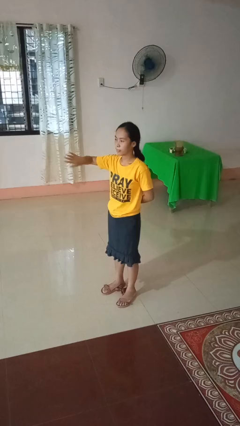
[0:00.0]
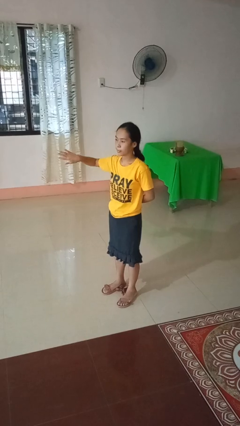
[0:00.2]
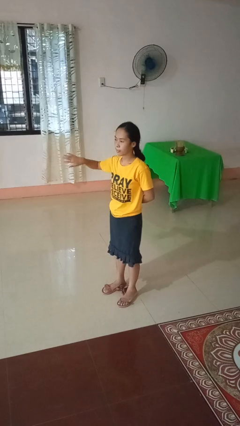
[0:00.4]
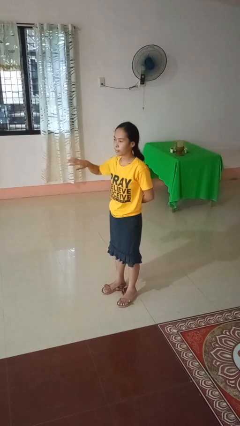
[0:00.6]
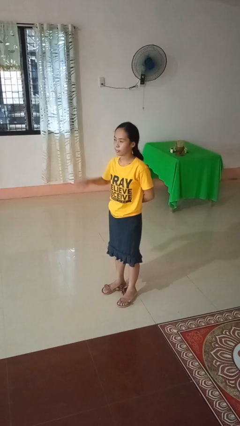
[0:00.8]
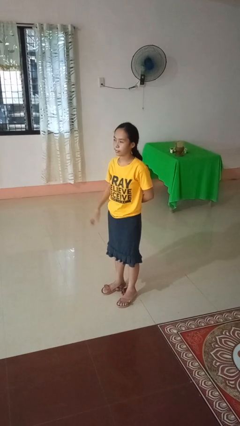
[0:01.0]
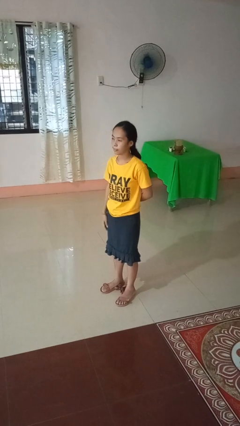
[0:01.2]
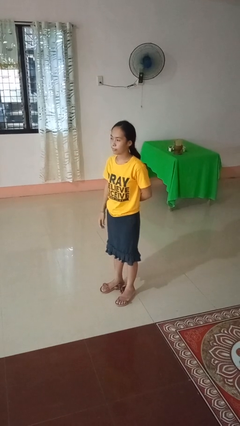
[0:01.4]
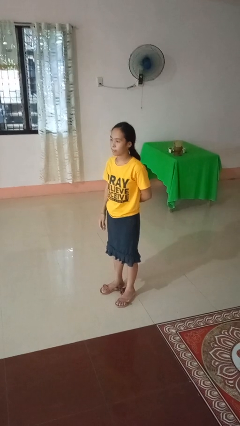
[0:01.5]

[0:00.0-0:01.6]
person gestures swipe right

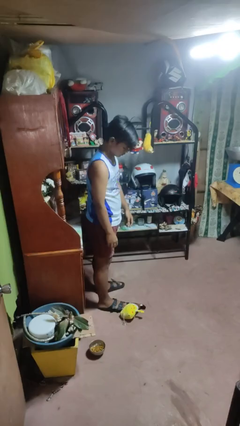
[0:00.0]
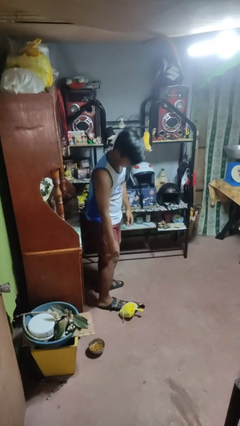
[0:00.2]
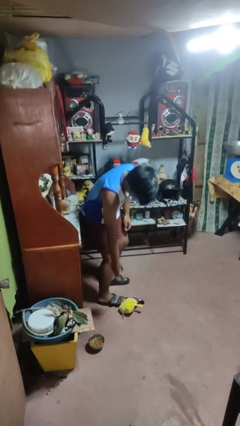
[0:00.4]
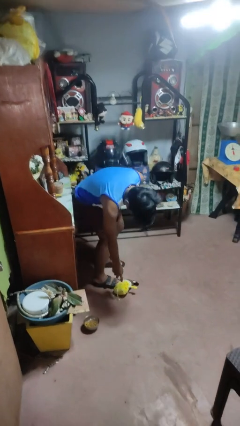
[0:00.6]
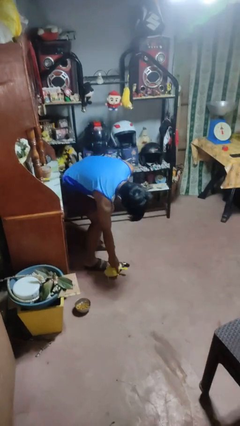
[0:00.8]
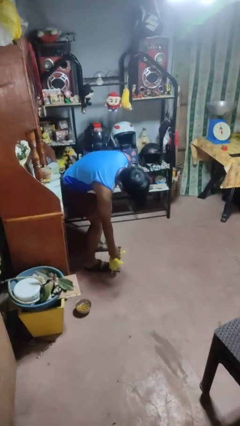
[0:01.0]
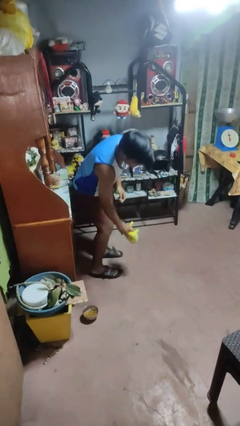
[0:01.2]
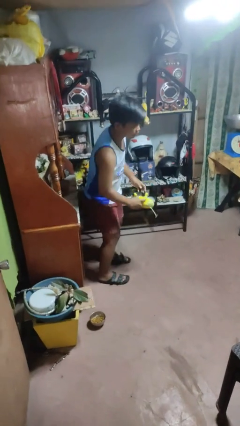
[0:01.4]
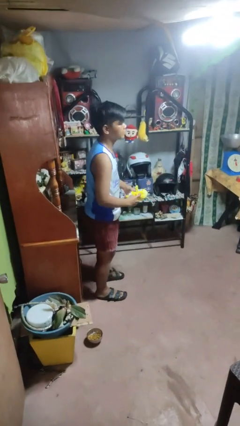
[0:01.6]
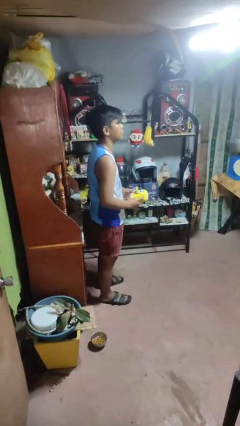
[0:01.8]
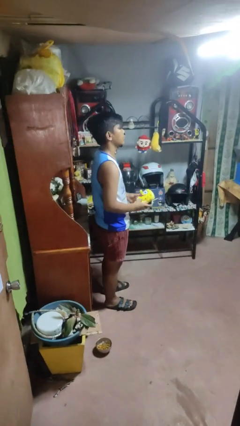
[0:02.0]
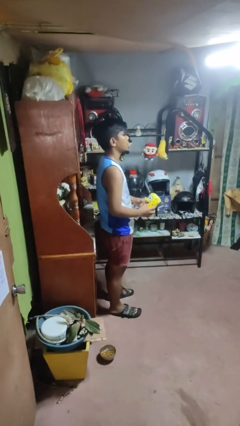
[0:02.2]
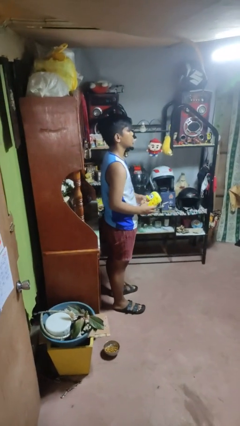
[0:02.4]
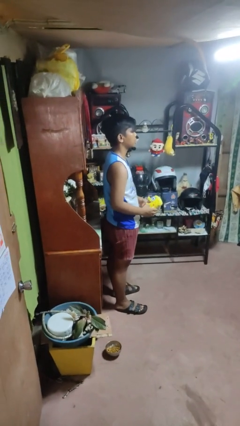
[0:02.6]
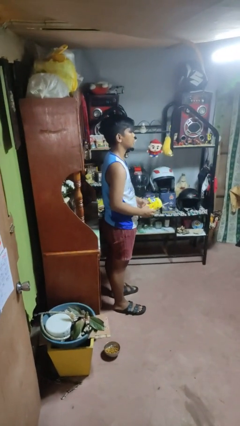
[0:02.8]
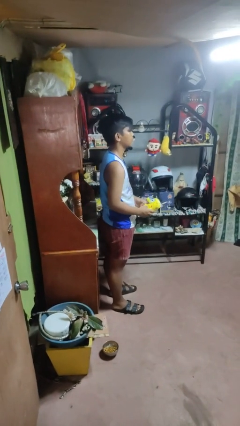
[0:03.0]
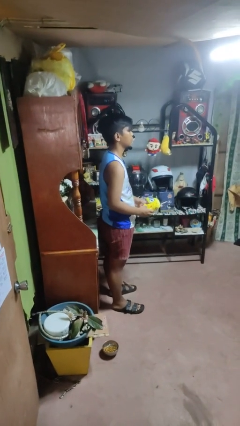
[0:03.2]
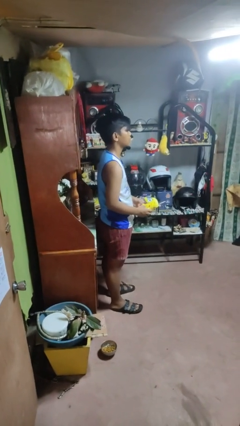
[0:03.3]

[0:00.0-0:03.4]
person picks up object from floor

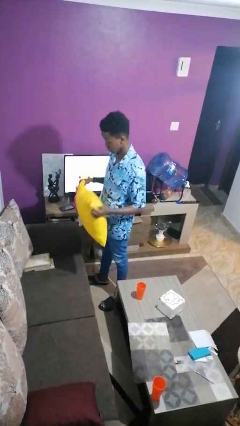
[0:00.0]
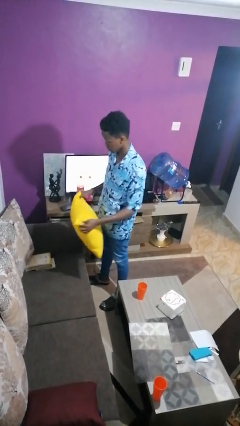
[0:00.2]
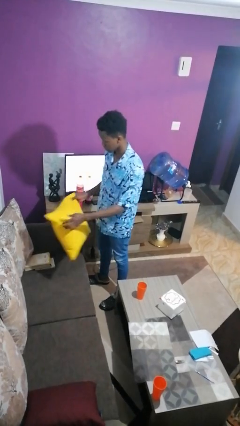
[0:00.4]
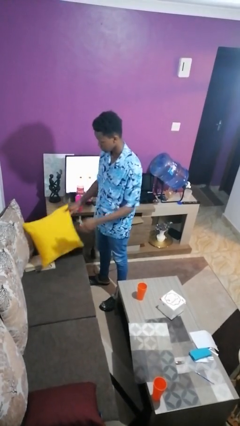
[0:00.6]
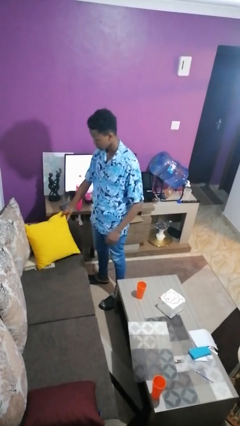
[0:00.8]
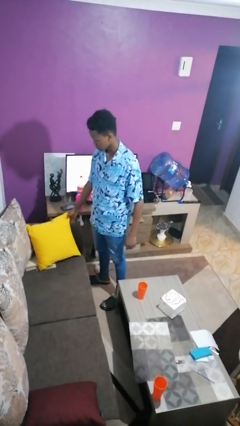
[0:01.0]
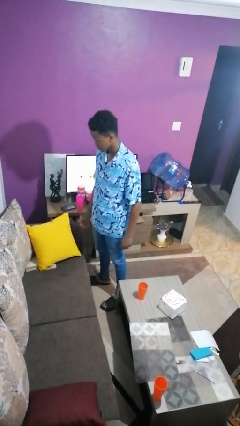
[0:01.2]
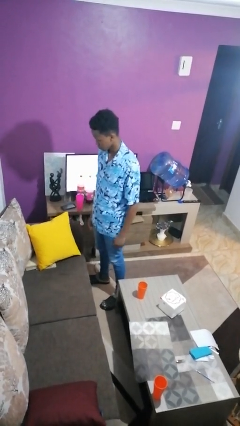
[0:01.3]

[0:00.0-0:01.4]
person puts down object on couch

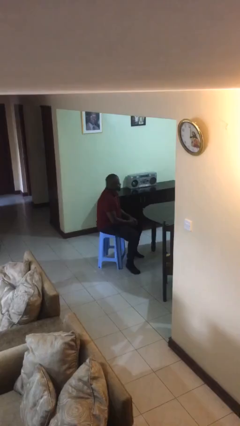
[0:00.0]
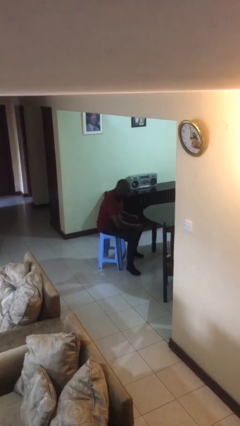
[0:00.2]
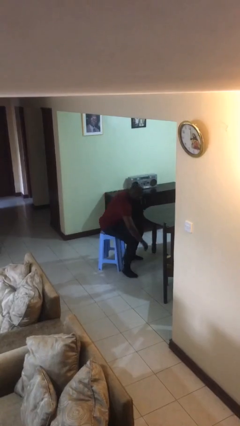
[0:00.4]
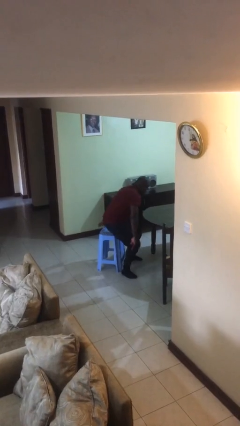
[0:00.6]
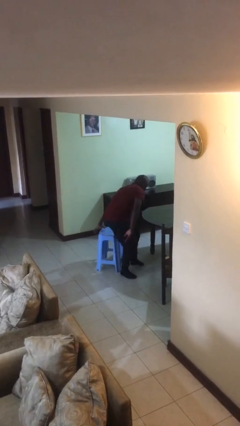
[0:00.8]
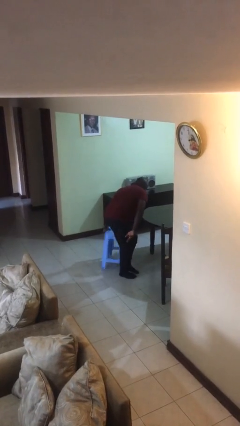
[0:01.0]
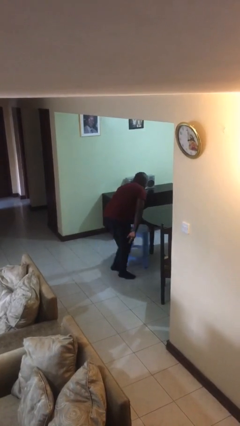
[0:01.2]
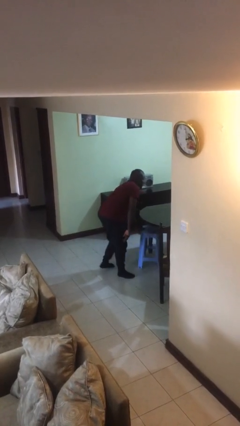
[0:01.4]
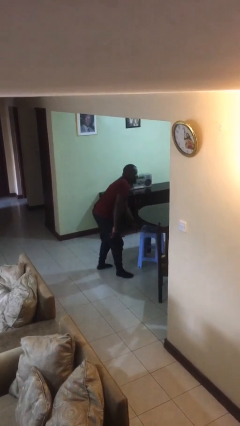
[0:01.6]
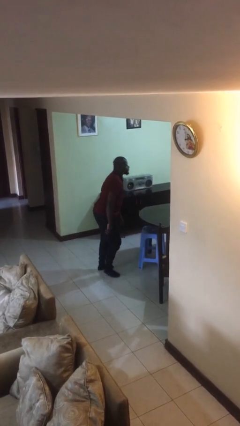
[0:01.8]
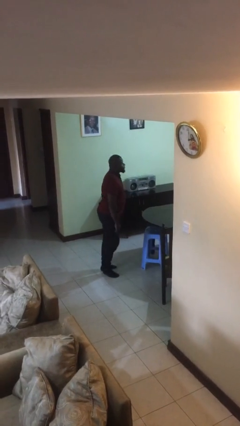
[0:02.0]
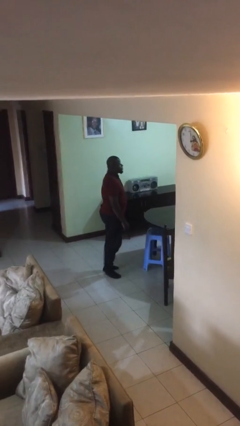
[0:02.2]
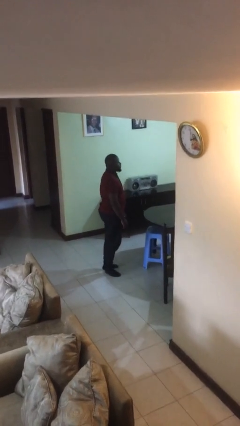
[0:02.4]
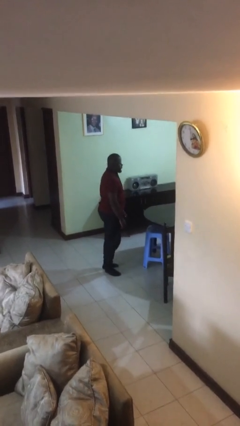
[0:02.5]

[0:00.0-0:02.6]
person stands up

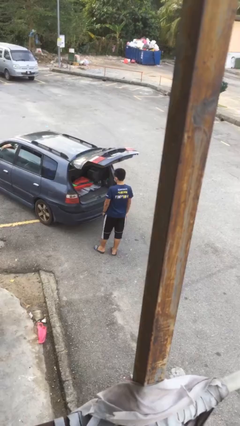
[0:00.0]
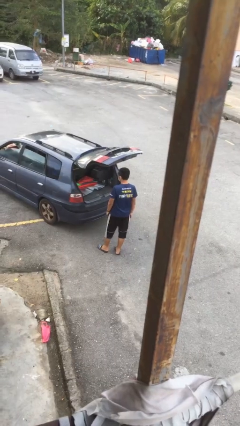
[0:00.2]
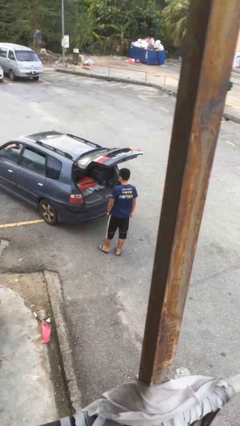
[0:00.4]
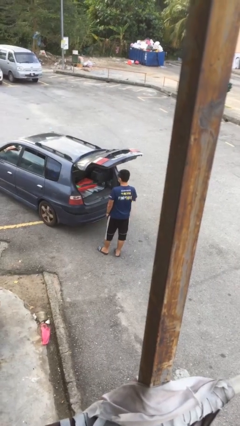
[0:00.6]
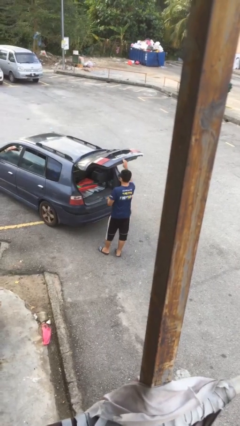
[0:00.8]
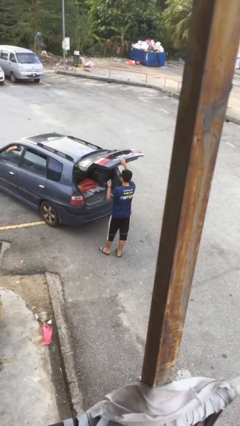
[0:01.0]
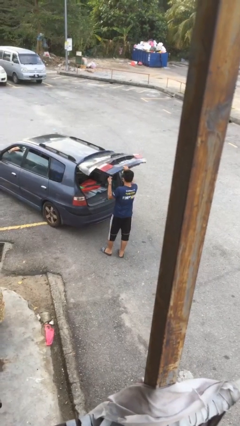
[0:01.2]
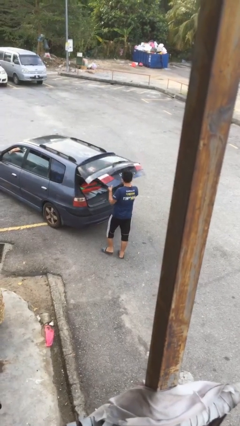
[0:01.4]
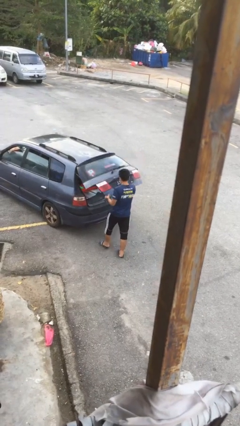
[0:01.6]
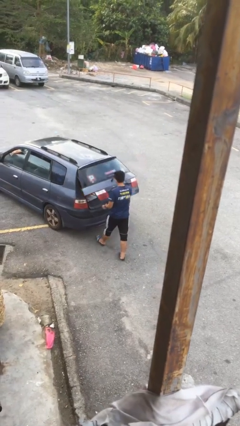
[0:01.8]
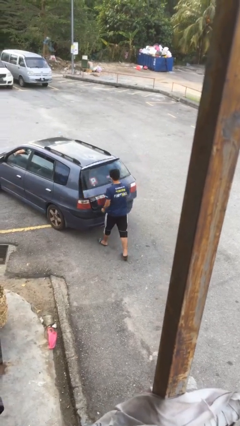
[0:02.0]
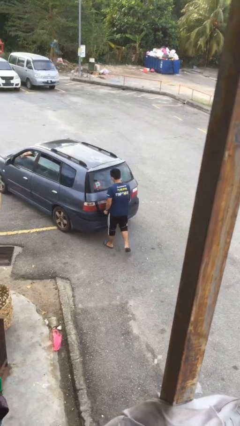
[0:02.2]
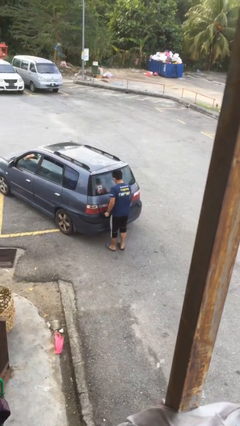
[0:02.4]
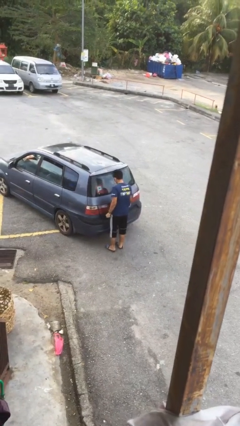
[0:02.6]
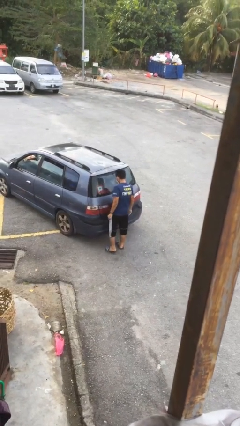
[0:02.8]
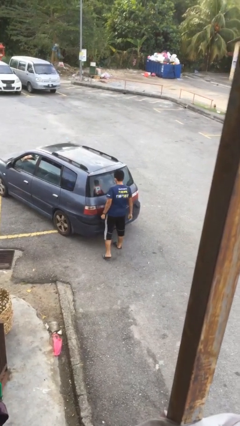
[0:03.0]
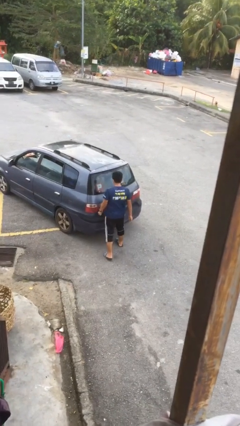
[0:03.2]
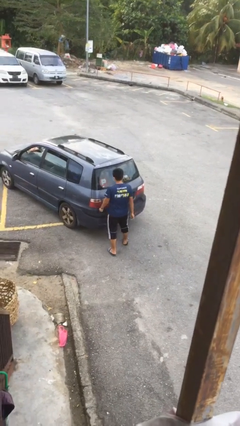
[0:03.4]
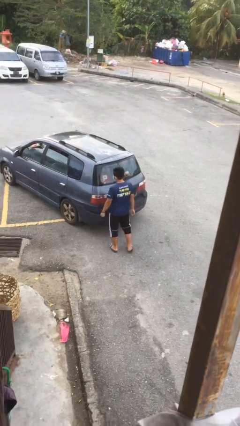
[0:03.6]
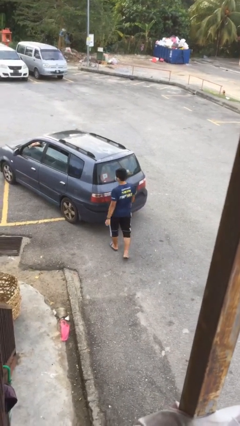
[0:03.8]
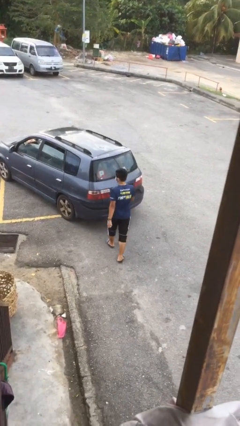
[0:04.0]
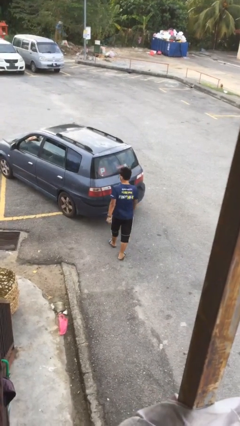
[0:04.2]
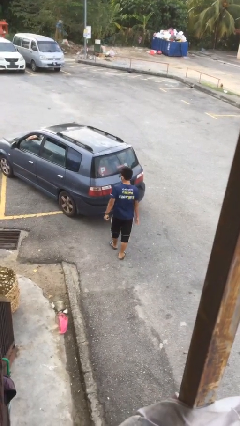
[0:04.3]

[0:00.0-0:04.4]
person closes car trunk

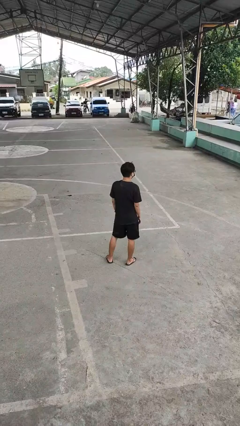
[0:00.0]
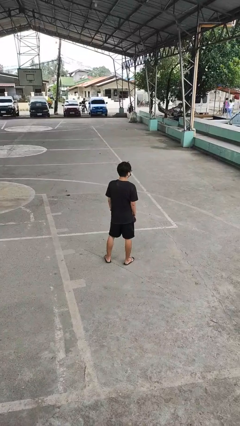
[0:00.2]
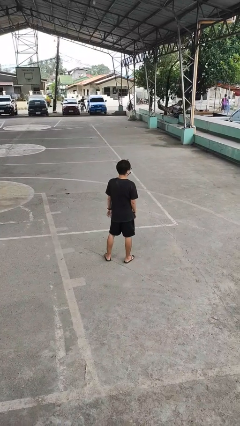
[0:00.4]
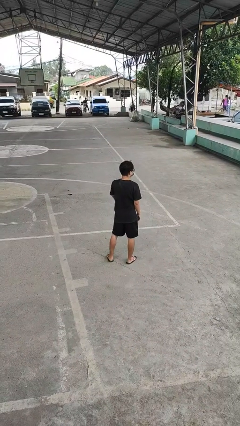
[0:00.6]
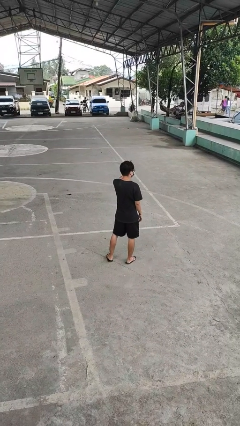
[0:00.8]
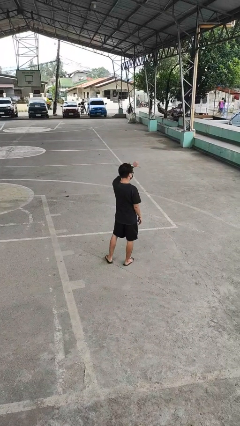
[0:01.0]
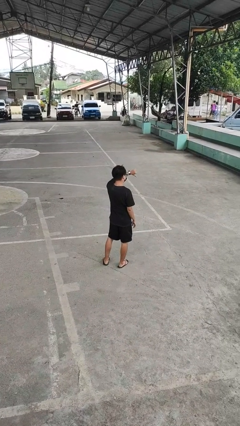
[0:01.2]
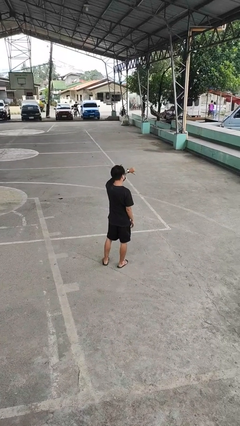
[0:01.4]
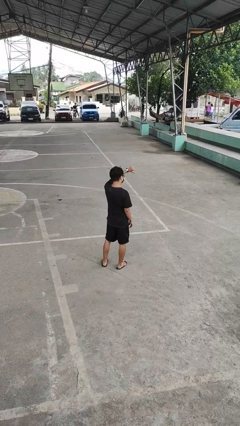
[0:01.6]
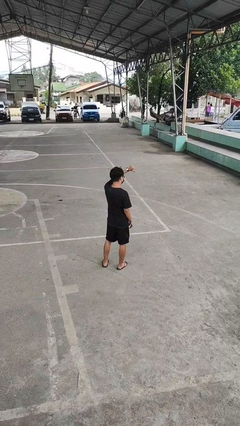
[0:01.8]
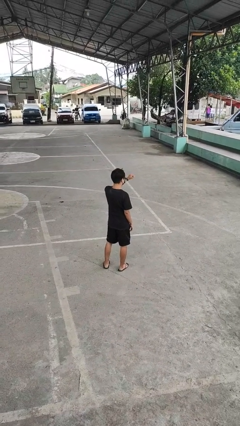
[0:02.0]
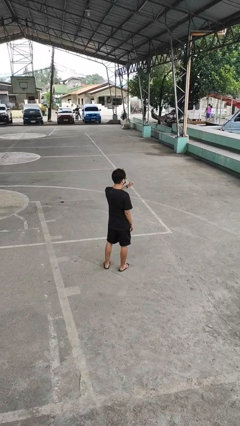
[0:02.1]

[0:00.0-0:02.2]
person gestures thumbs down

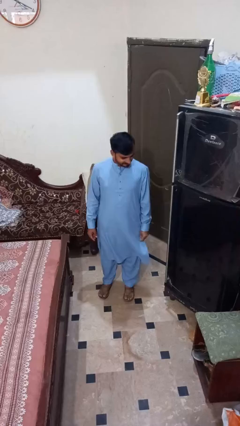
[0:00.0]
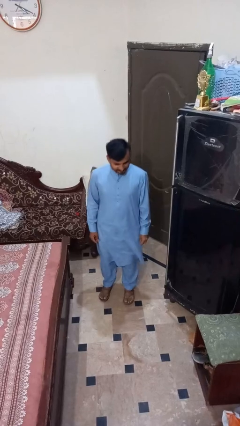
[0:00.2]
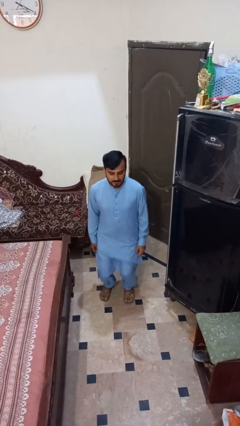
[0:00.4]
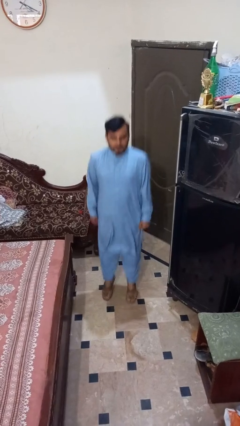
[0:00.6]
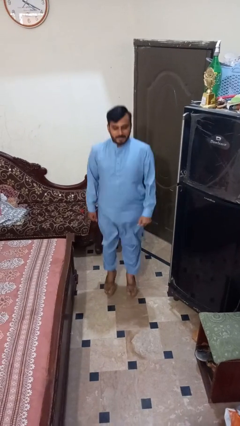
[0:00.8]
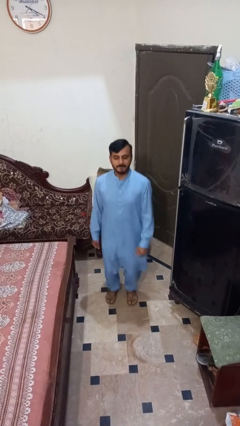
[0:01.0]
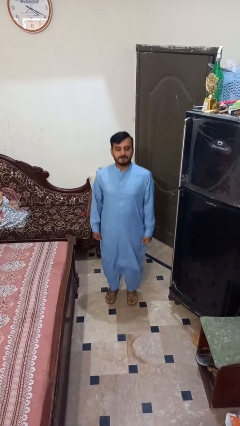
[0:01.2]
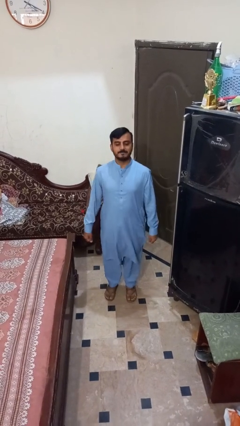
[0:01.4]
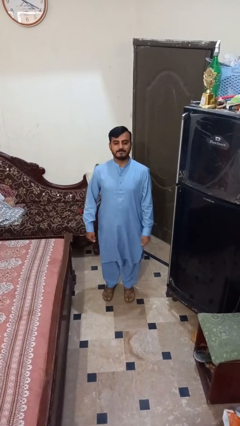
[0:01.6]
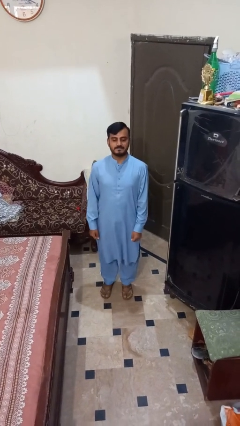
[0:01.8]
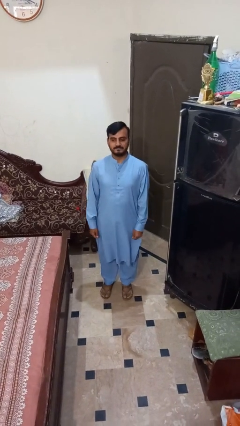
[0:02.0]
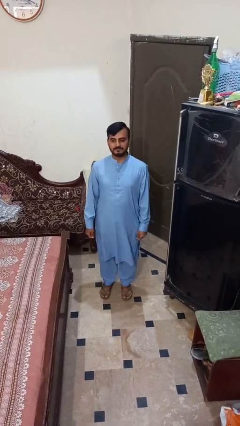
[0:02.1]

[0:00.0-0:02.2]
person jumps
